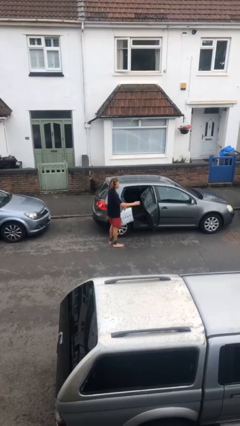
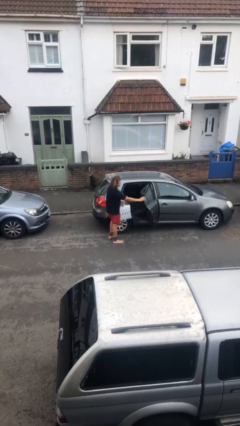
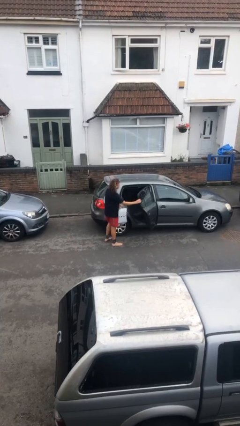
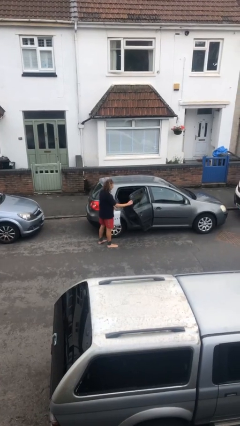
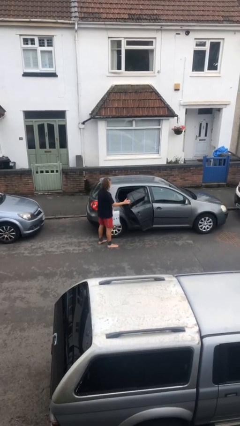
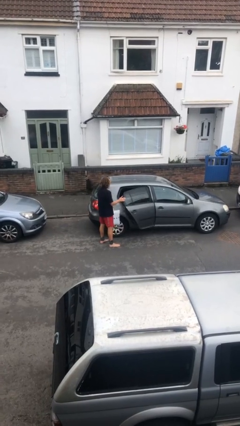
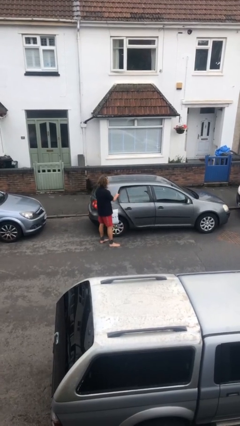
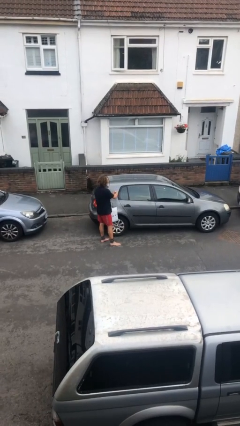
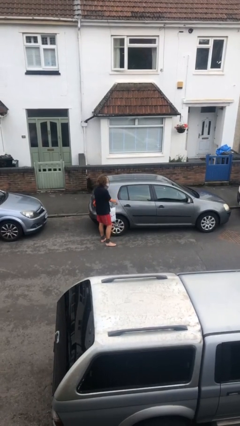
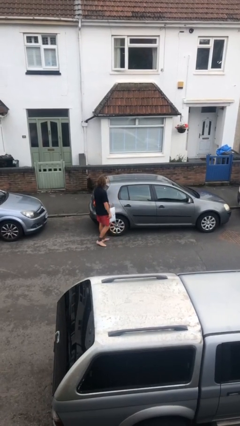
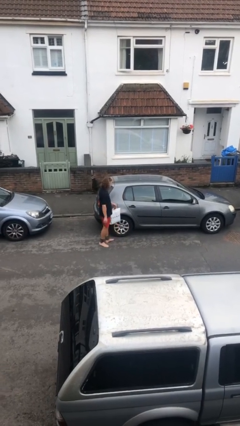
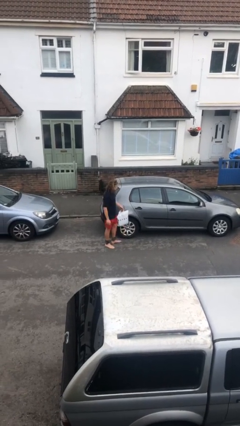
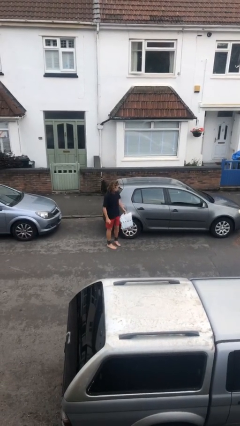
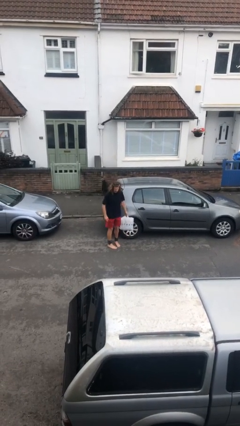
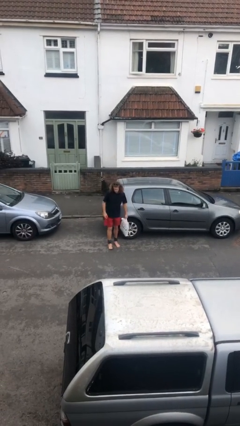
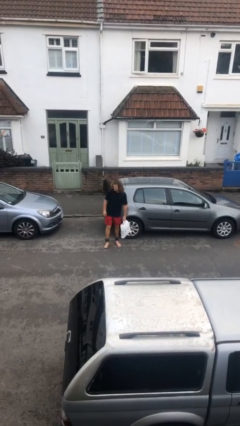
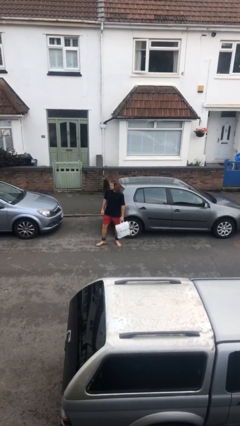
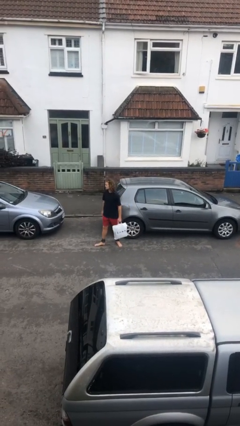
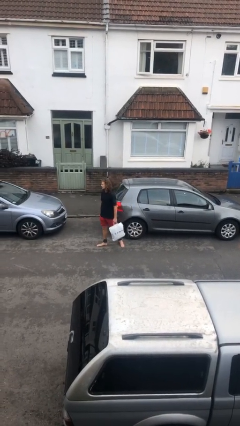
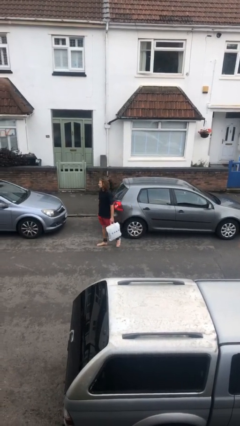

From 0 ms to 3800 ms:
person closes car door

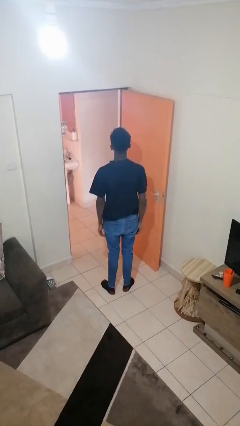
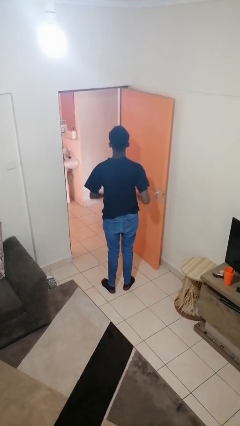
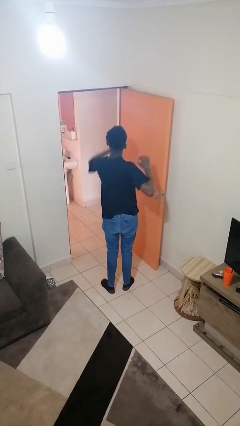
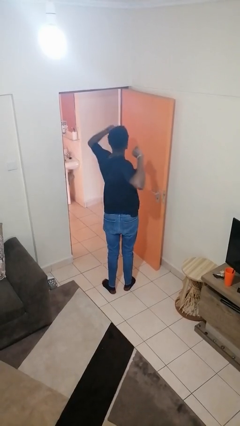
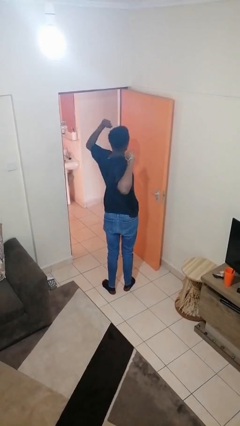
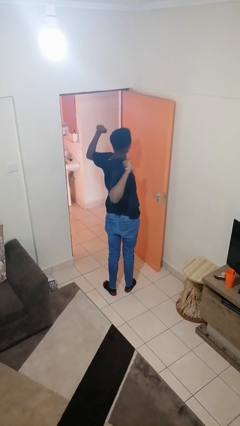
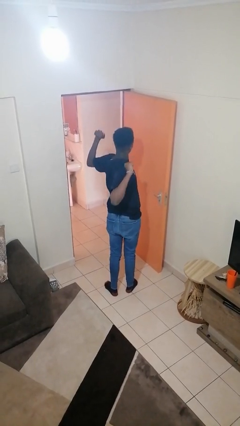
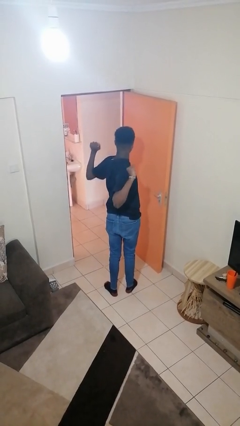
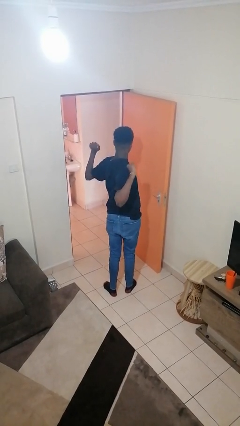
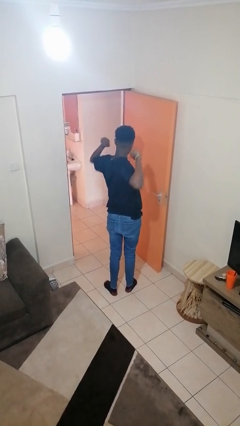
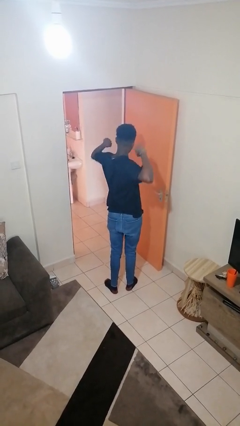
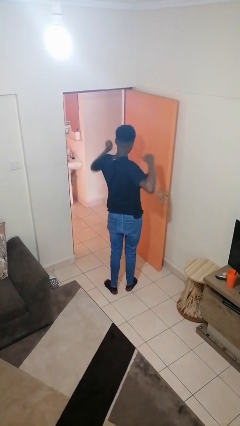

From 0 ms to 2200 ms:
person stretches arms to side

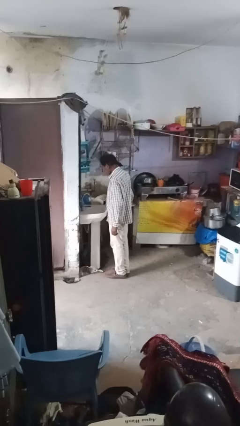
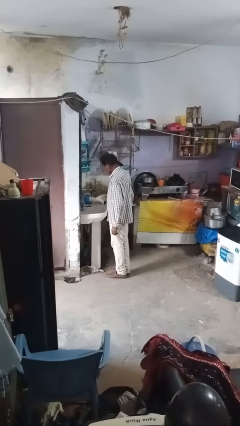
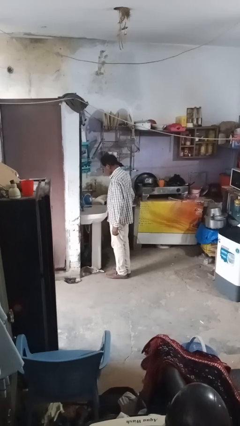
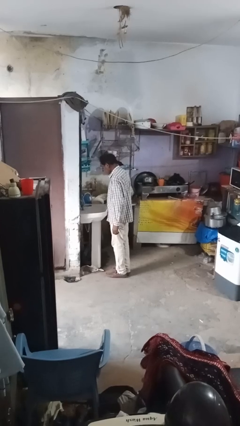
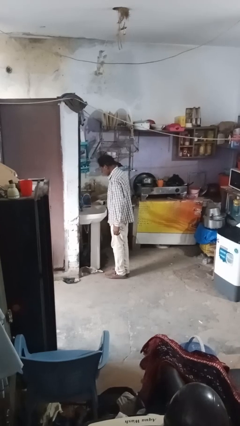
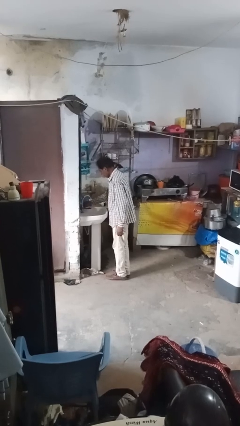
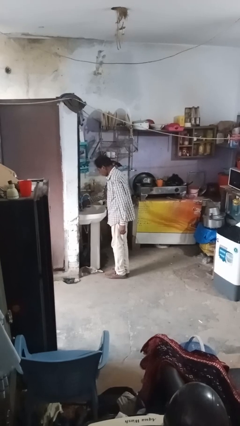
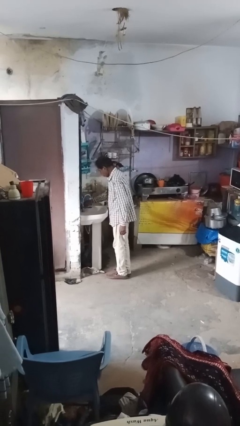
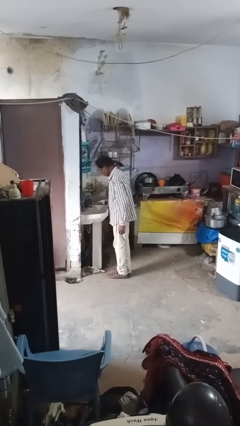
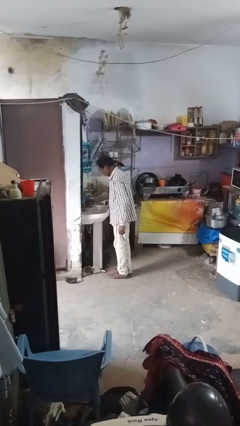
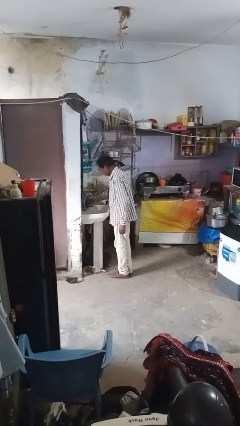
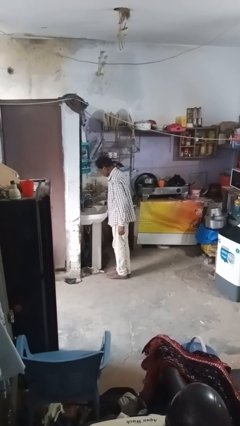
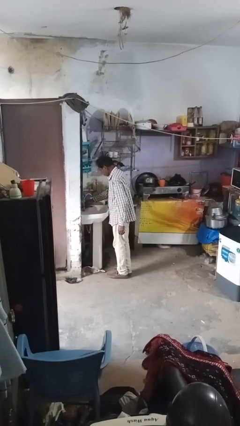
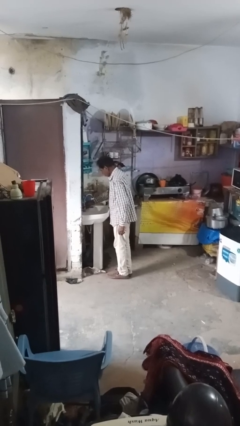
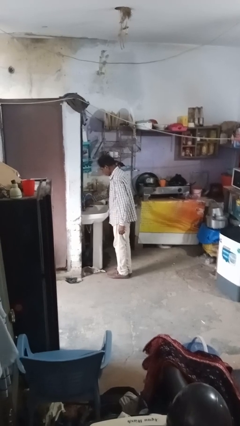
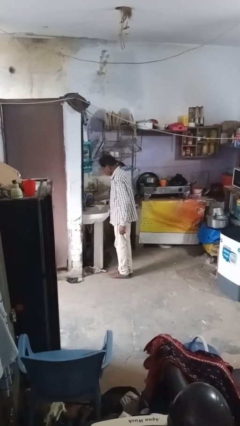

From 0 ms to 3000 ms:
person turns off faucet

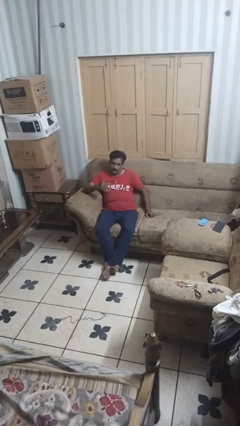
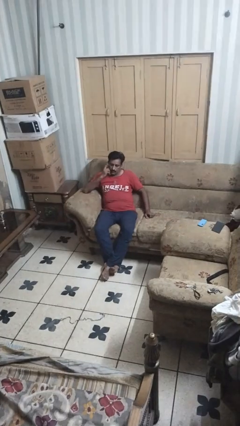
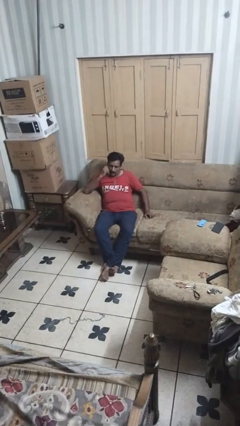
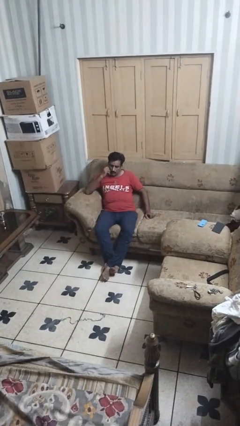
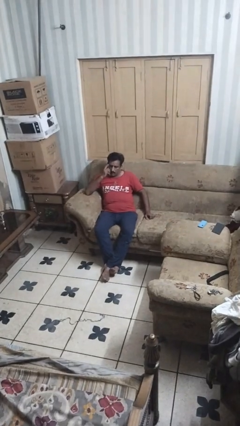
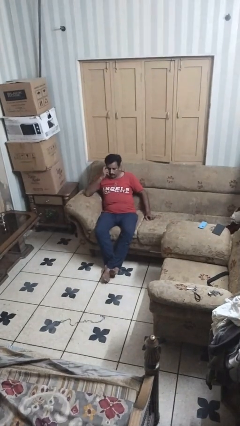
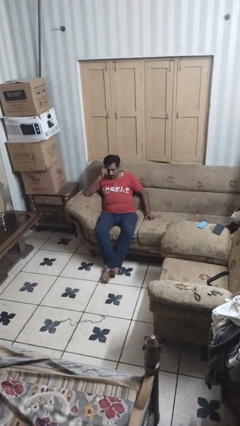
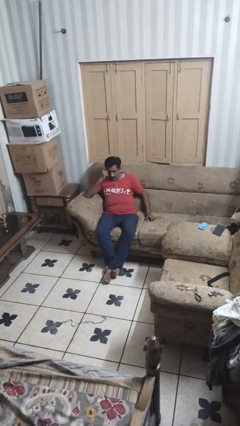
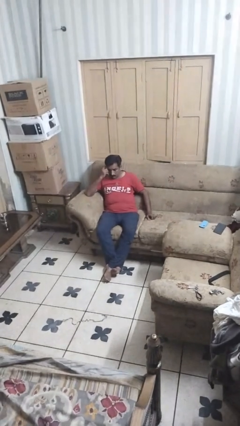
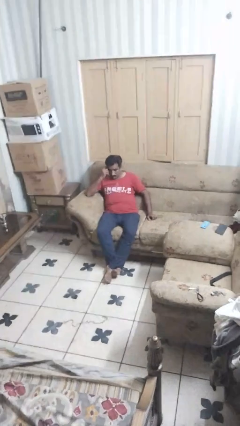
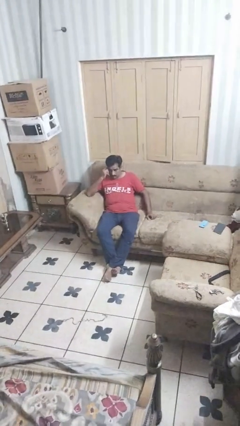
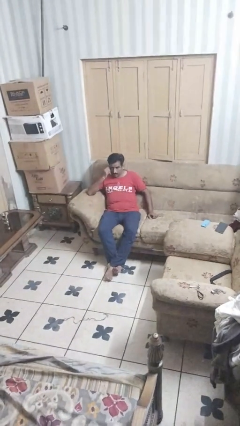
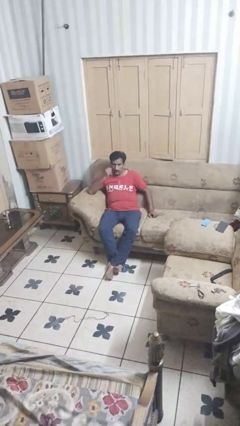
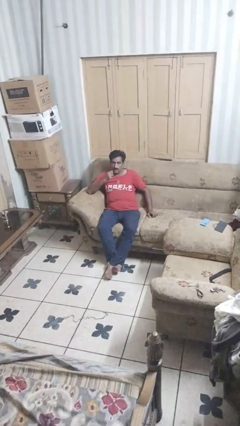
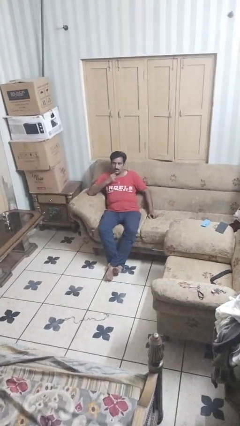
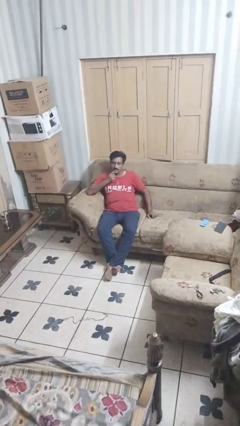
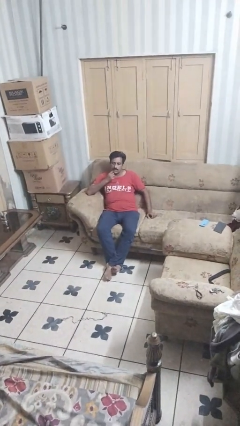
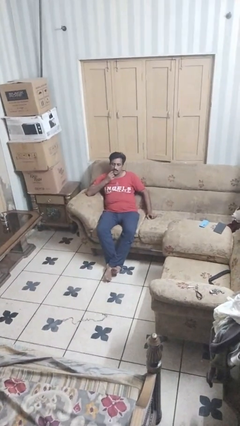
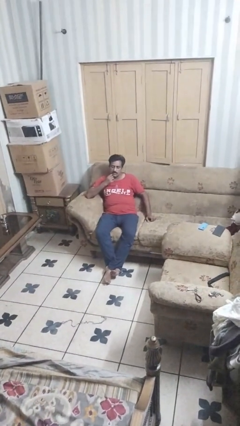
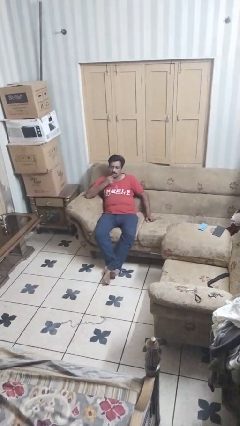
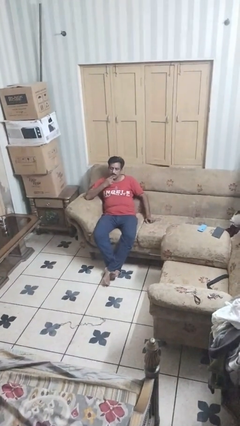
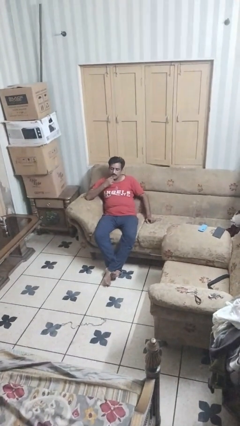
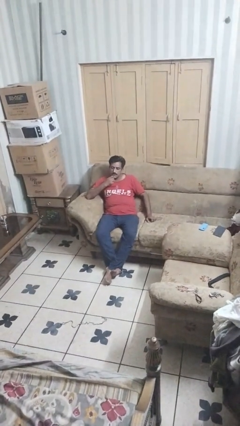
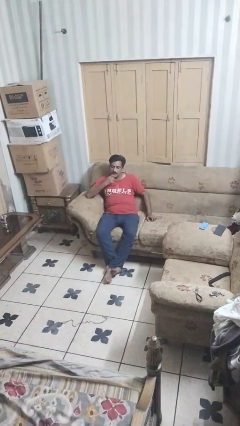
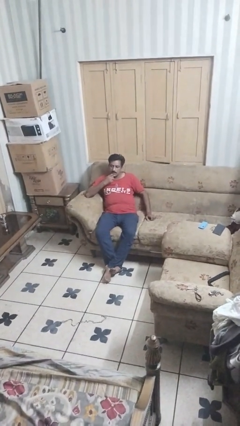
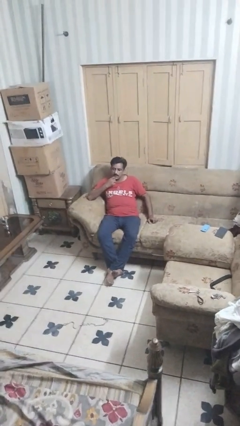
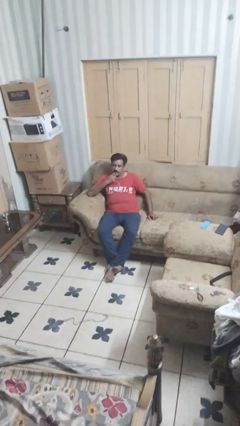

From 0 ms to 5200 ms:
person strokes chin

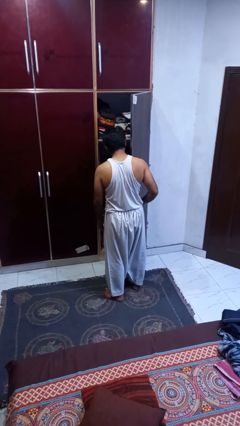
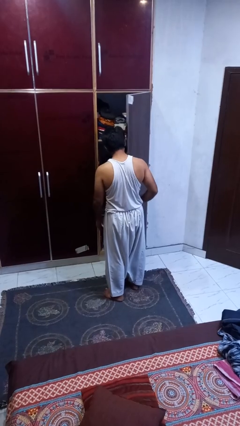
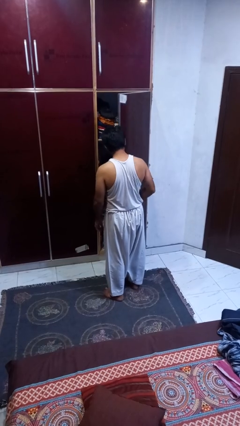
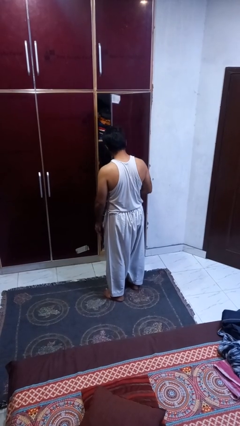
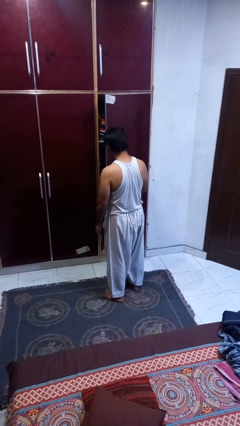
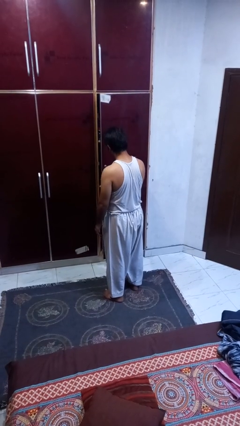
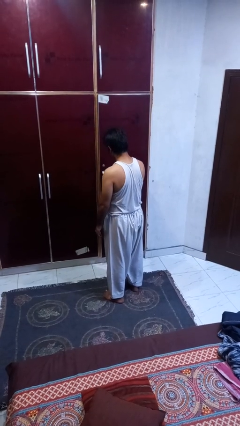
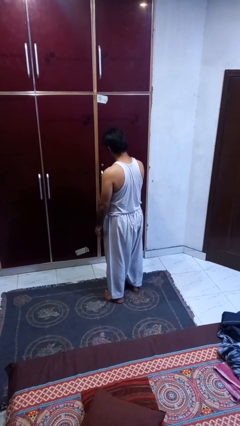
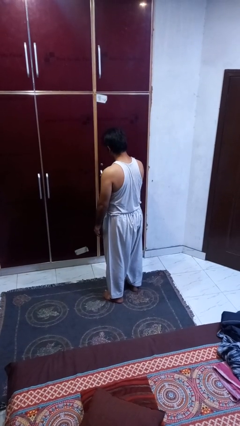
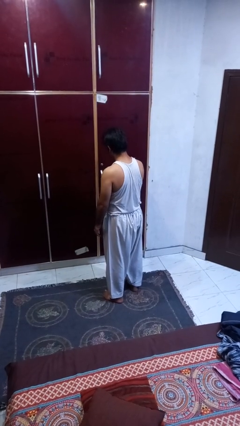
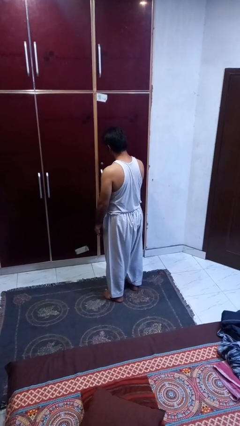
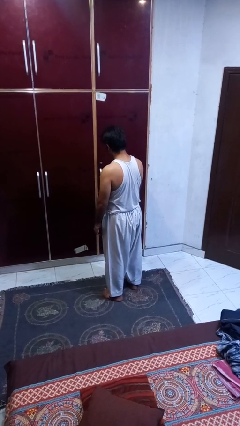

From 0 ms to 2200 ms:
person closes closet door

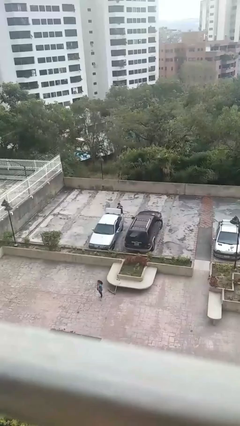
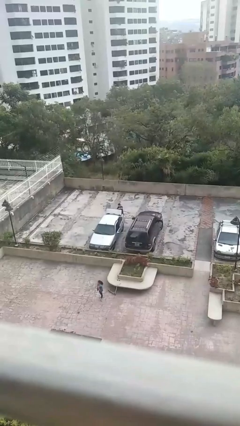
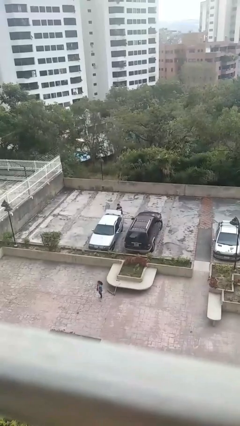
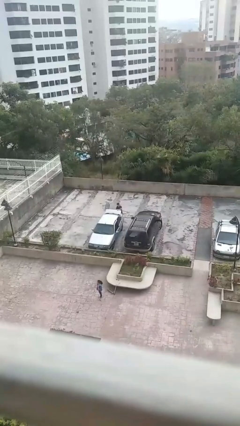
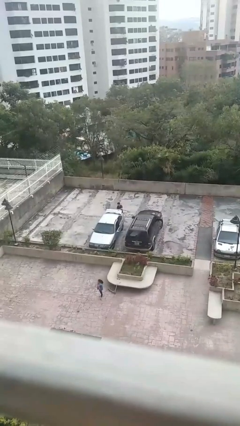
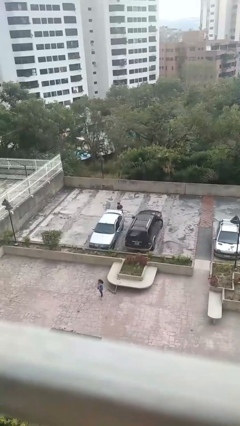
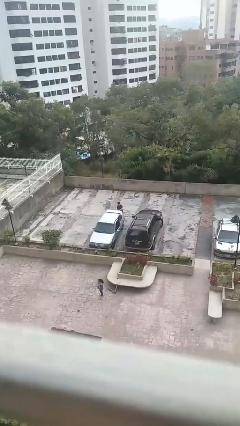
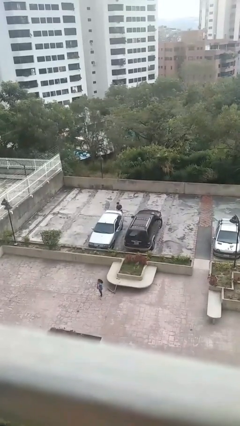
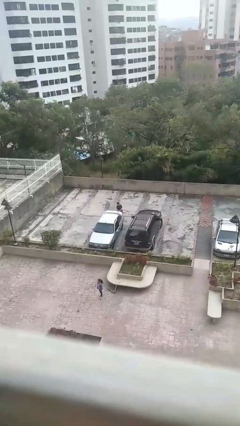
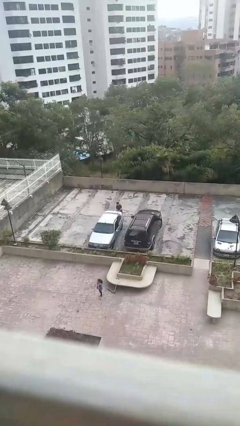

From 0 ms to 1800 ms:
person closes car trunk
